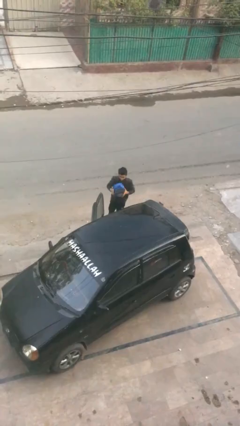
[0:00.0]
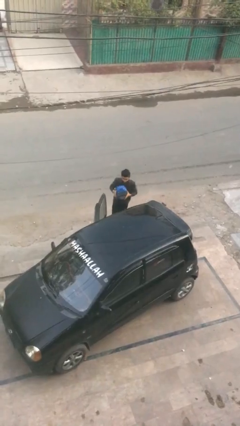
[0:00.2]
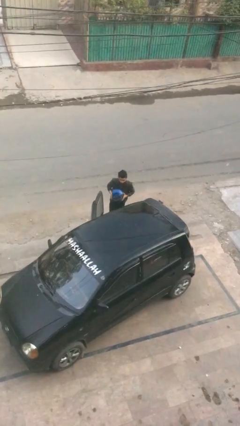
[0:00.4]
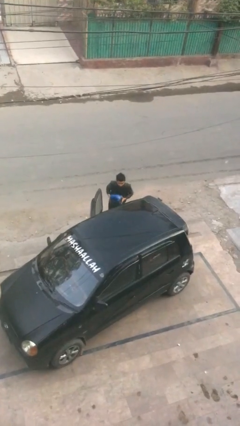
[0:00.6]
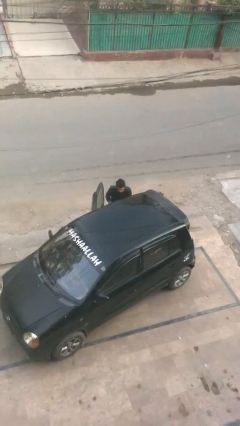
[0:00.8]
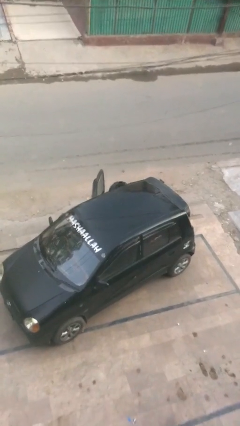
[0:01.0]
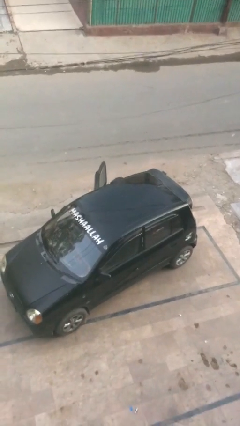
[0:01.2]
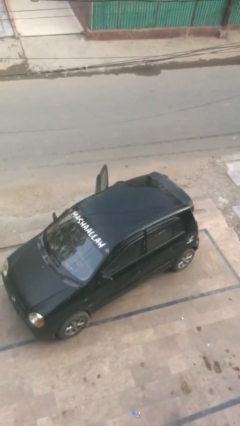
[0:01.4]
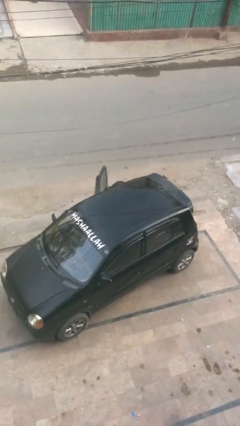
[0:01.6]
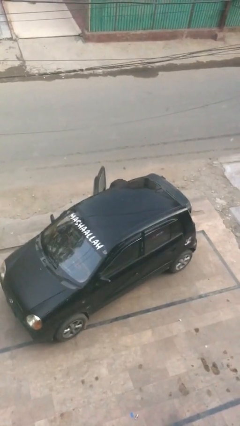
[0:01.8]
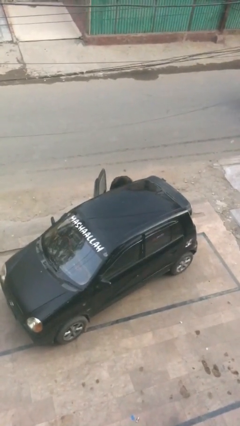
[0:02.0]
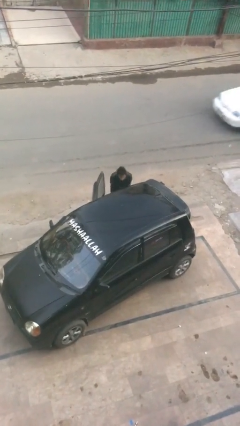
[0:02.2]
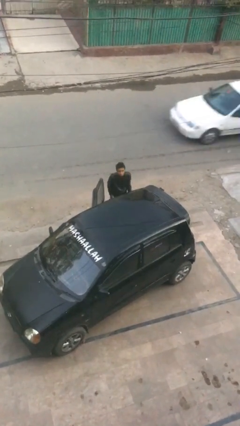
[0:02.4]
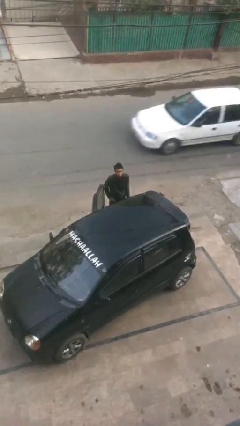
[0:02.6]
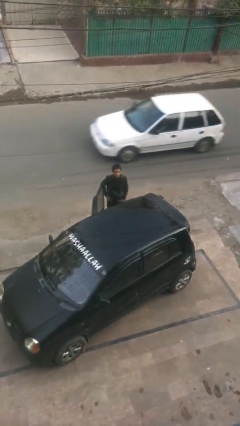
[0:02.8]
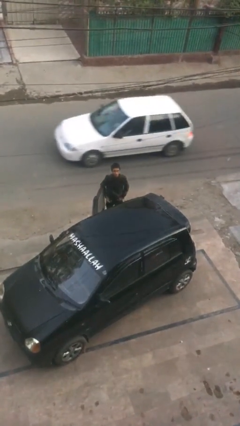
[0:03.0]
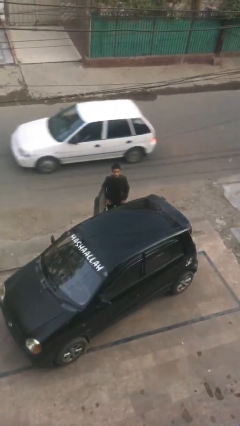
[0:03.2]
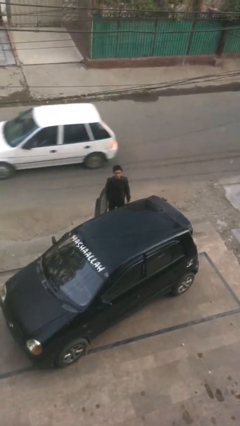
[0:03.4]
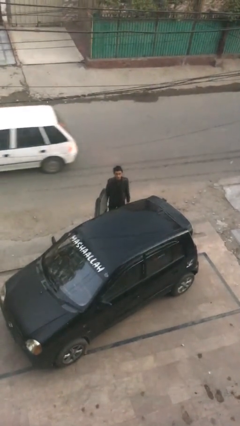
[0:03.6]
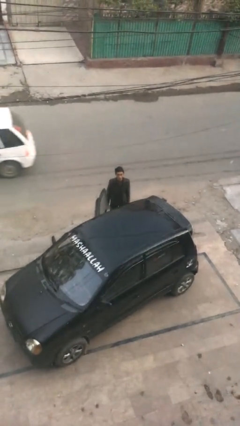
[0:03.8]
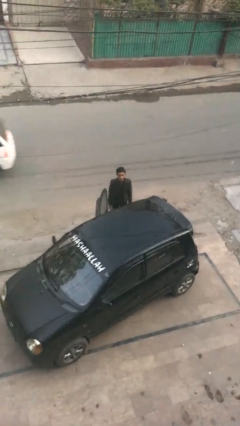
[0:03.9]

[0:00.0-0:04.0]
person loads car

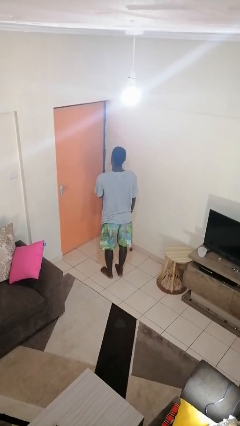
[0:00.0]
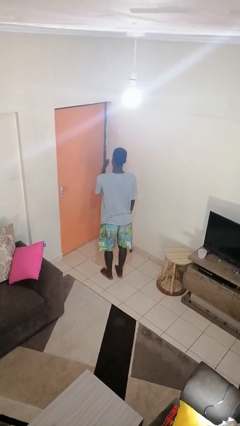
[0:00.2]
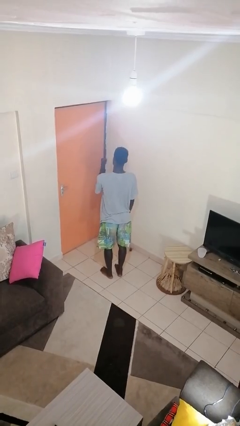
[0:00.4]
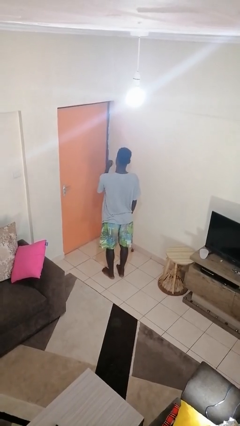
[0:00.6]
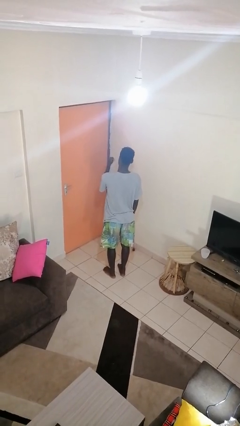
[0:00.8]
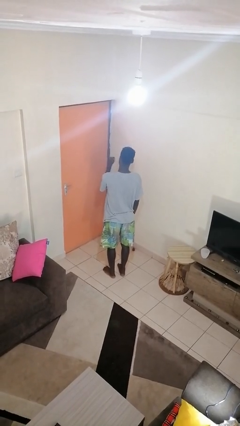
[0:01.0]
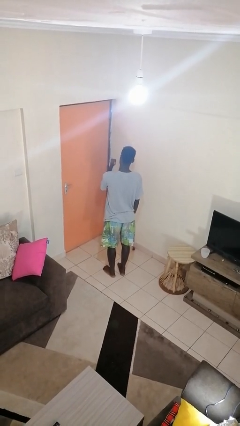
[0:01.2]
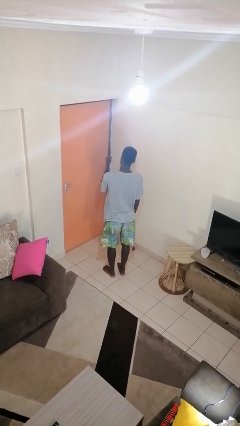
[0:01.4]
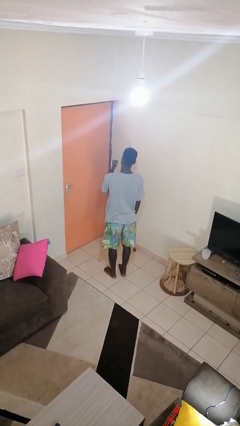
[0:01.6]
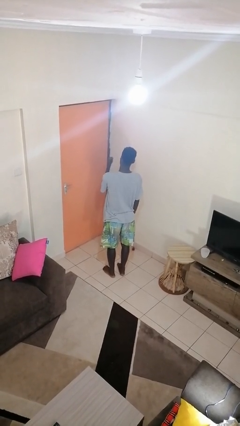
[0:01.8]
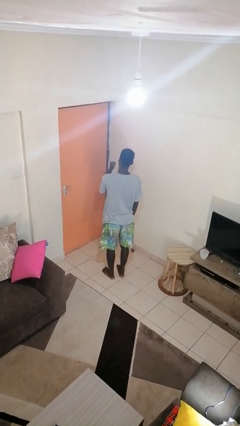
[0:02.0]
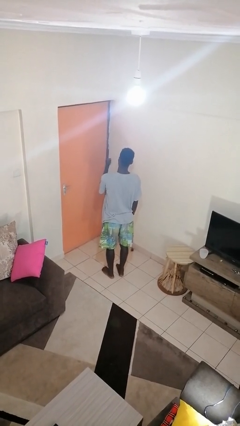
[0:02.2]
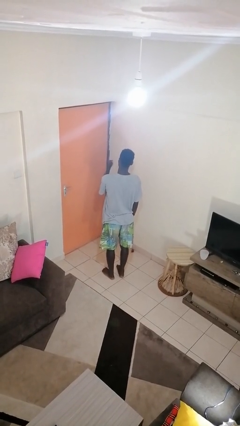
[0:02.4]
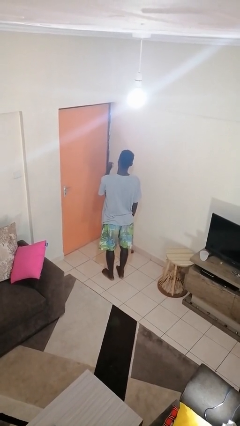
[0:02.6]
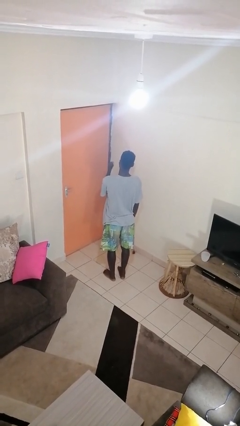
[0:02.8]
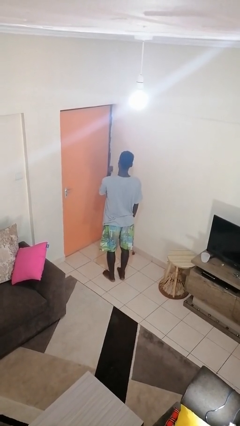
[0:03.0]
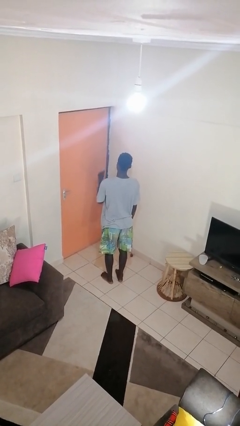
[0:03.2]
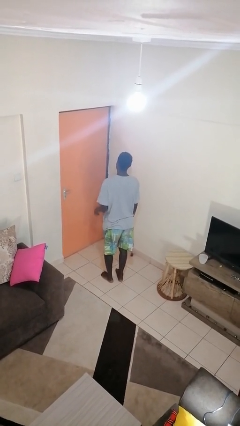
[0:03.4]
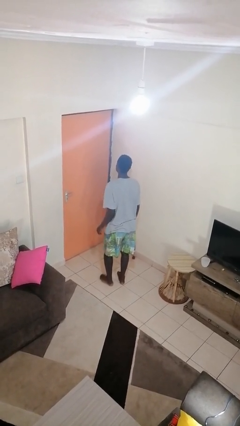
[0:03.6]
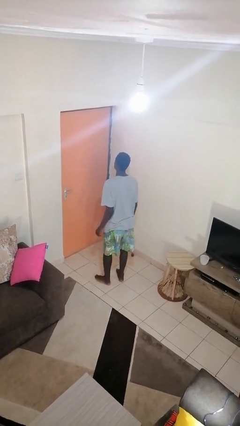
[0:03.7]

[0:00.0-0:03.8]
person gestures behind me

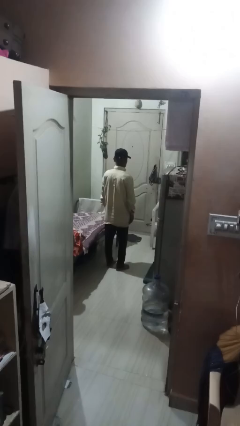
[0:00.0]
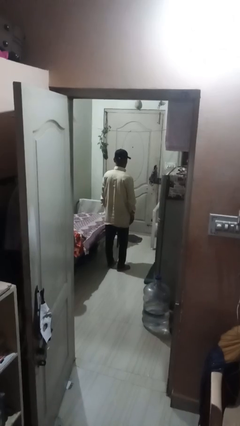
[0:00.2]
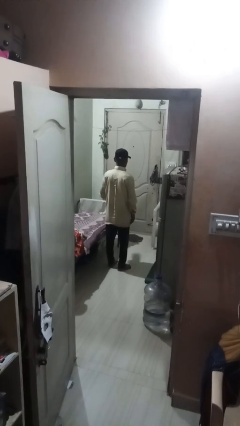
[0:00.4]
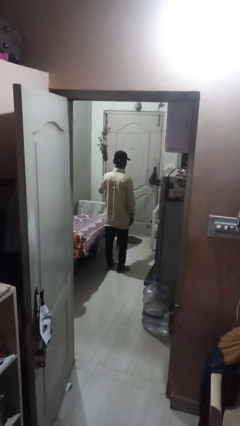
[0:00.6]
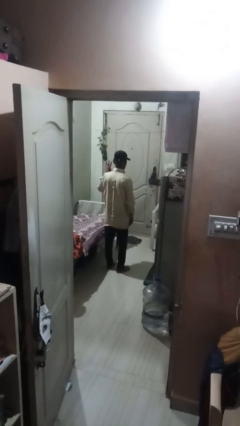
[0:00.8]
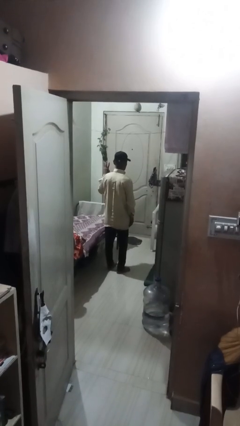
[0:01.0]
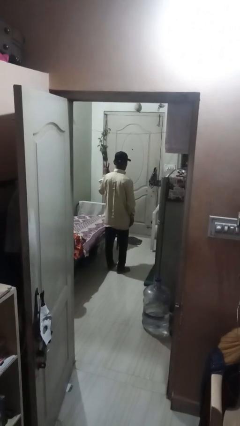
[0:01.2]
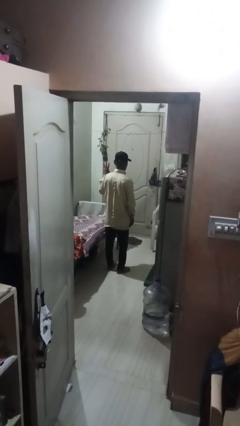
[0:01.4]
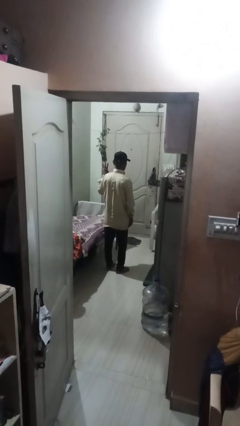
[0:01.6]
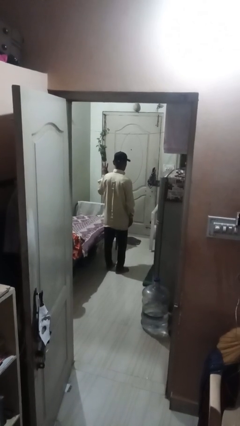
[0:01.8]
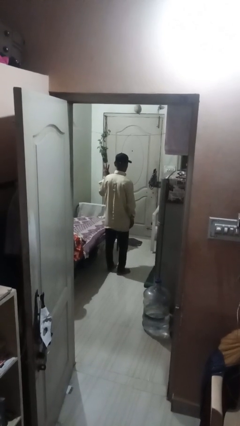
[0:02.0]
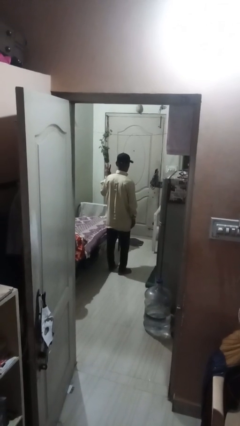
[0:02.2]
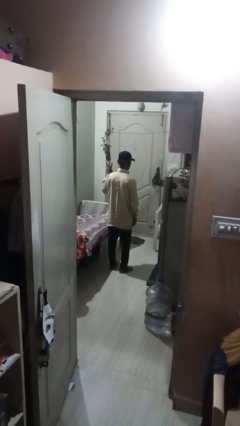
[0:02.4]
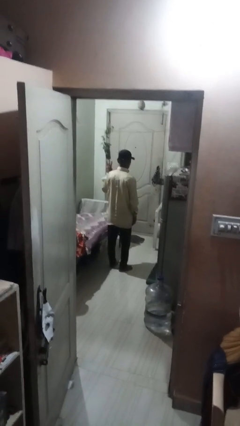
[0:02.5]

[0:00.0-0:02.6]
person gestures number three

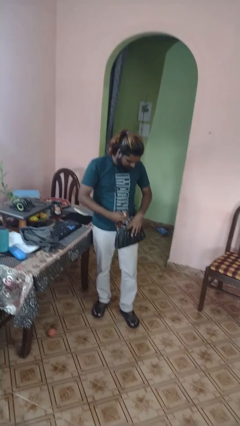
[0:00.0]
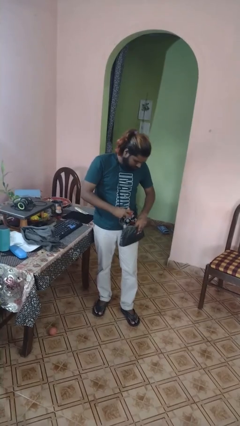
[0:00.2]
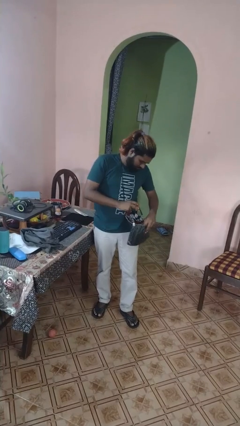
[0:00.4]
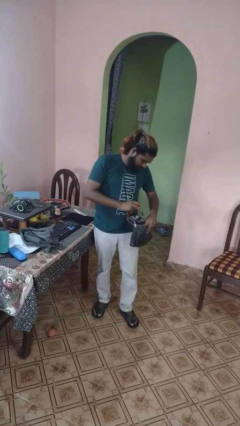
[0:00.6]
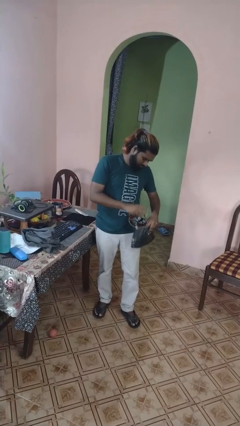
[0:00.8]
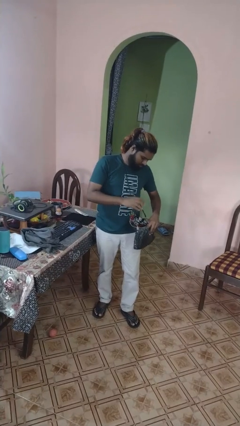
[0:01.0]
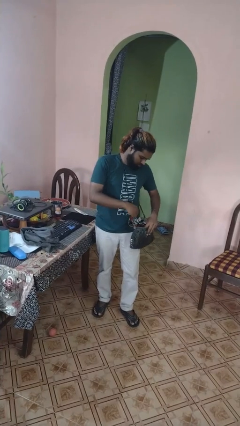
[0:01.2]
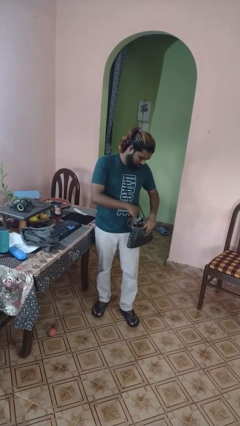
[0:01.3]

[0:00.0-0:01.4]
person puts object into purse

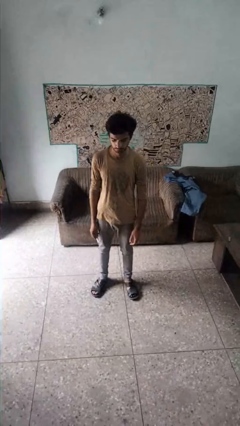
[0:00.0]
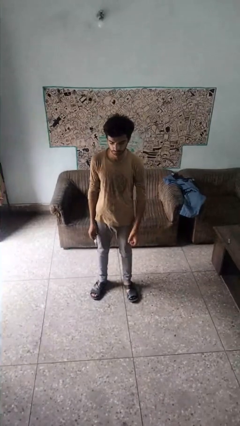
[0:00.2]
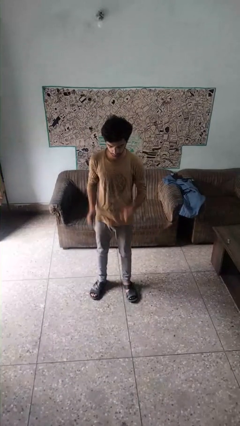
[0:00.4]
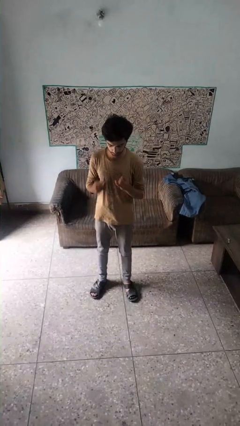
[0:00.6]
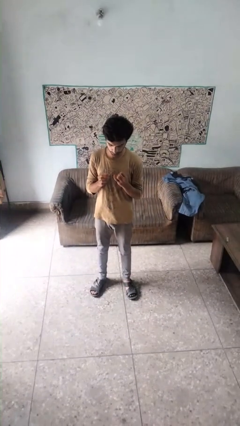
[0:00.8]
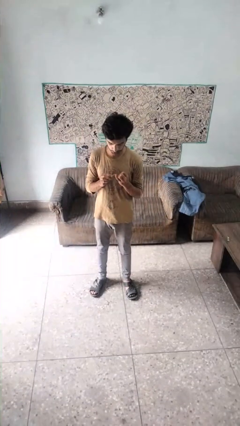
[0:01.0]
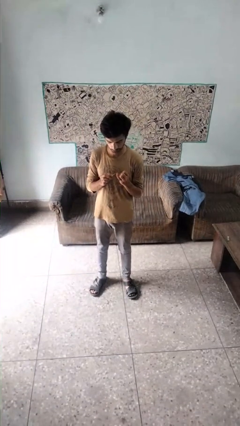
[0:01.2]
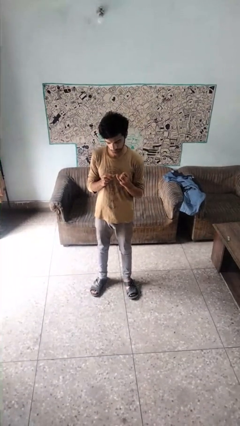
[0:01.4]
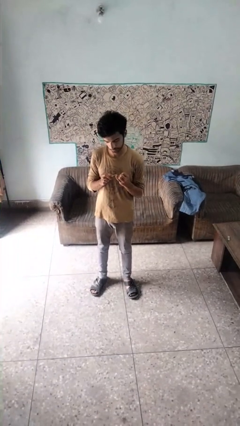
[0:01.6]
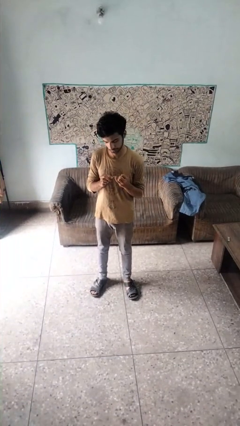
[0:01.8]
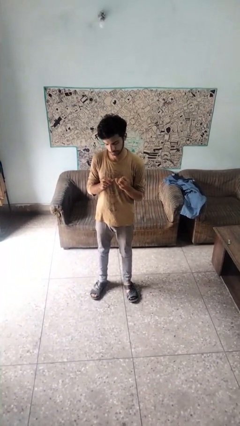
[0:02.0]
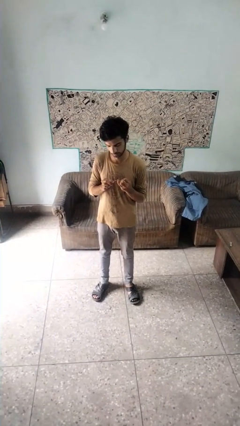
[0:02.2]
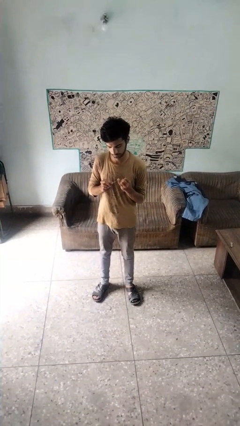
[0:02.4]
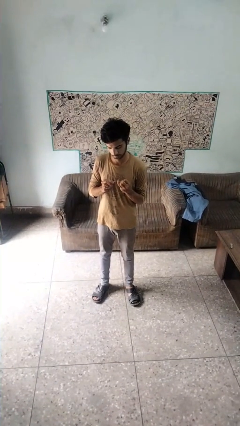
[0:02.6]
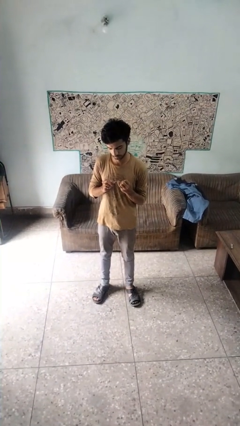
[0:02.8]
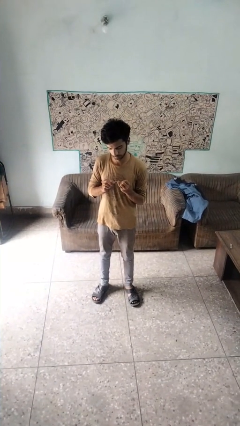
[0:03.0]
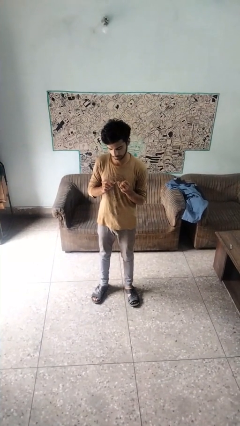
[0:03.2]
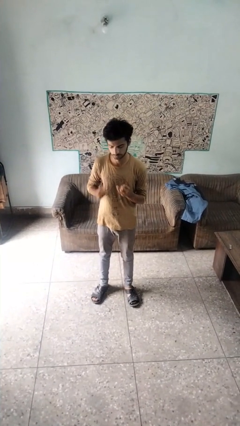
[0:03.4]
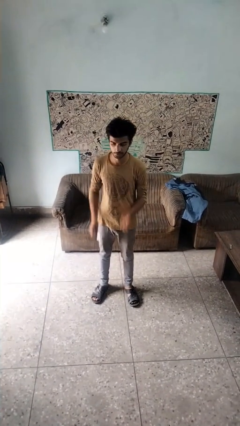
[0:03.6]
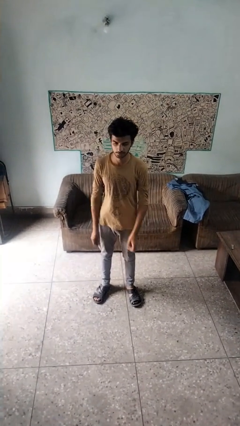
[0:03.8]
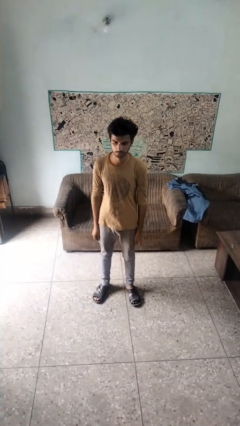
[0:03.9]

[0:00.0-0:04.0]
person files fingernails

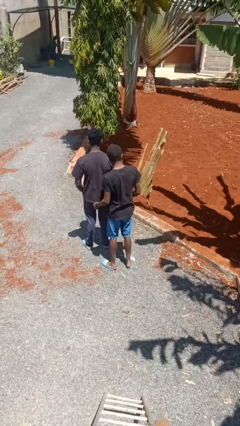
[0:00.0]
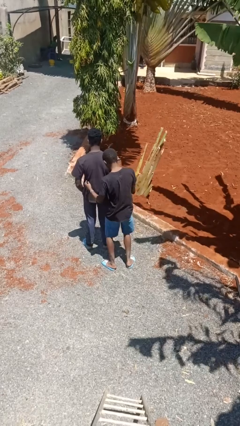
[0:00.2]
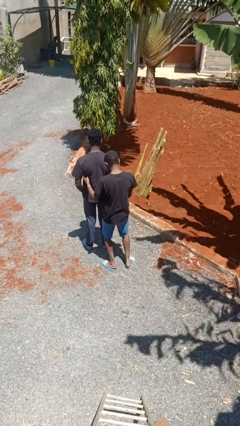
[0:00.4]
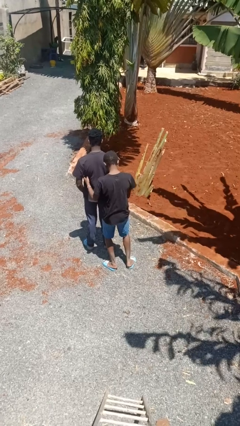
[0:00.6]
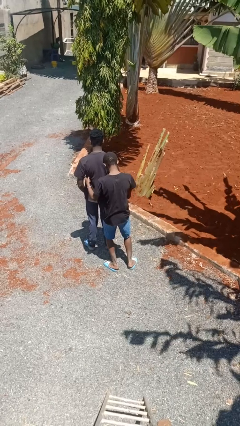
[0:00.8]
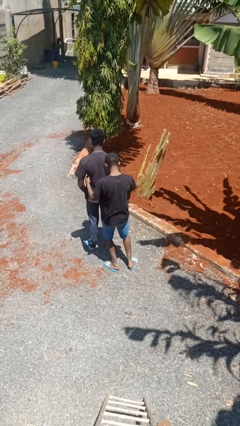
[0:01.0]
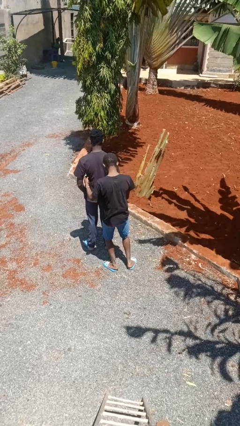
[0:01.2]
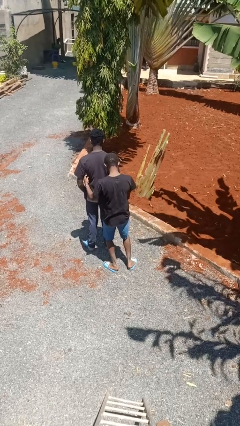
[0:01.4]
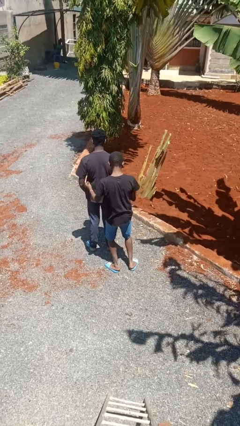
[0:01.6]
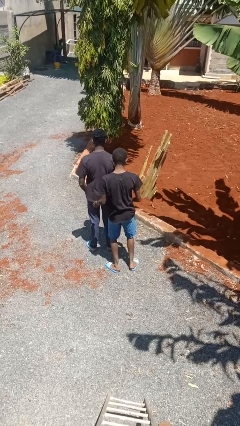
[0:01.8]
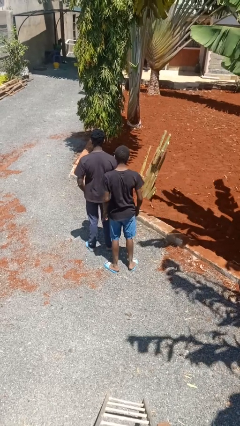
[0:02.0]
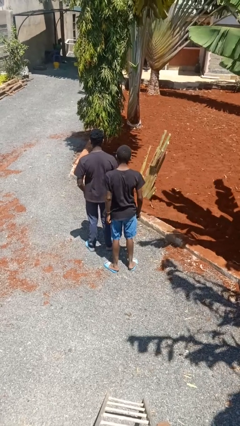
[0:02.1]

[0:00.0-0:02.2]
person tickles person
